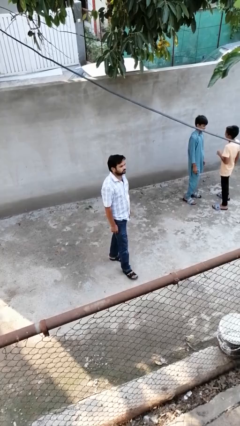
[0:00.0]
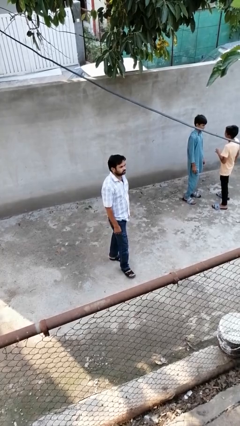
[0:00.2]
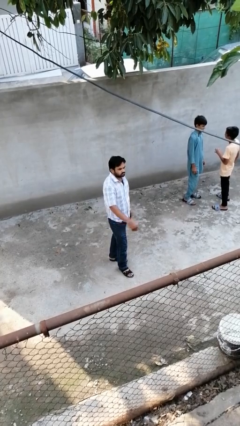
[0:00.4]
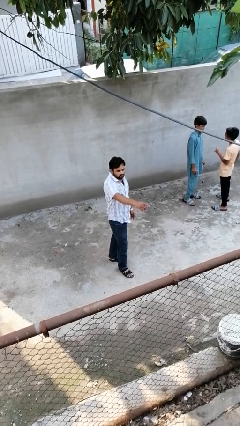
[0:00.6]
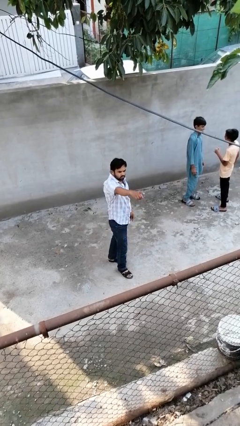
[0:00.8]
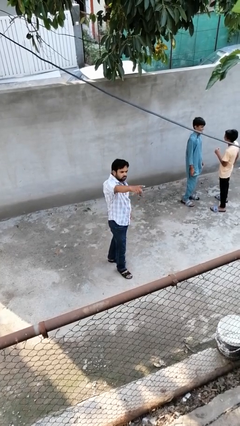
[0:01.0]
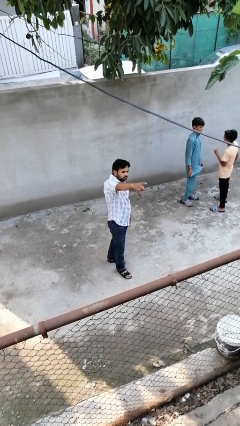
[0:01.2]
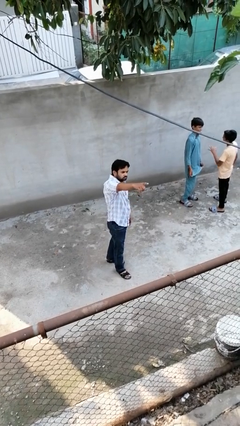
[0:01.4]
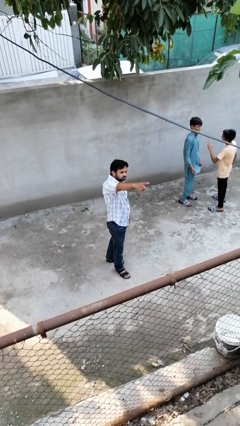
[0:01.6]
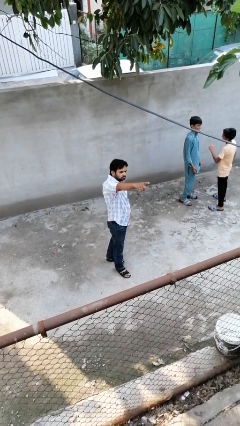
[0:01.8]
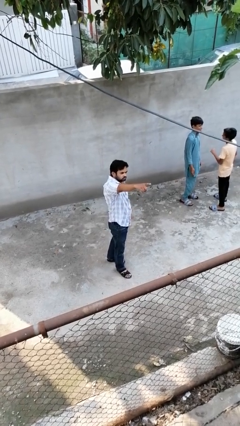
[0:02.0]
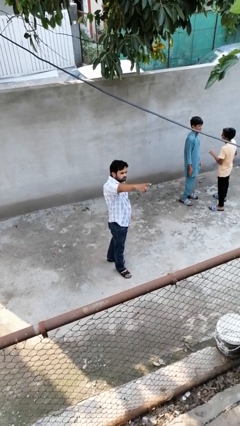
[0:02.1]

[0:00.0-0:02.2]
person points at person

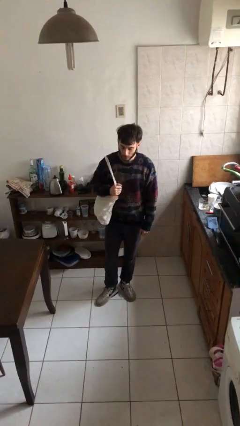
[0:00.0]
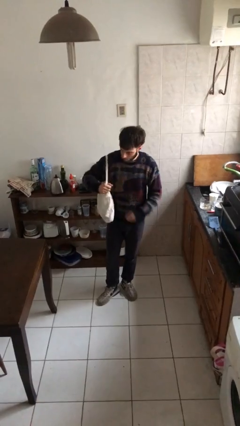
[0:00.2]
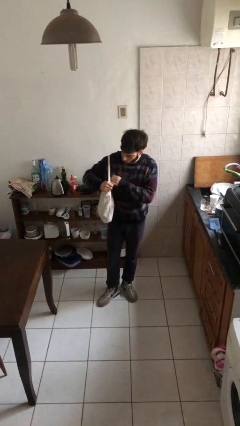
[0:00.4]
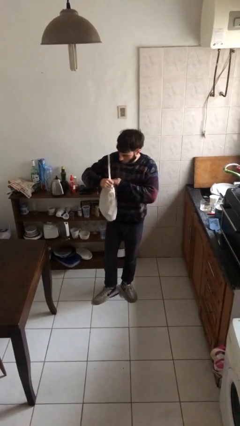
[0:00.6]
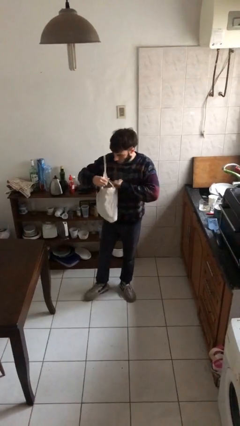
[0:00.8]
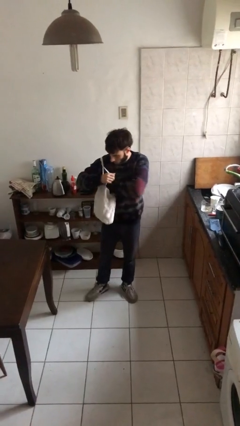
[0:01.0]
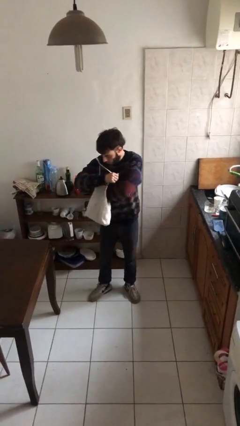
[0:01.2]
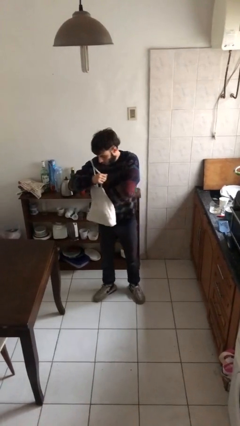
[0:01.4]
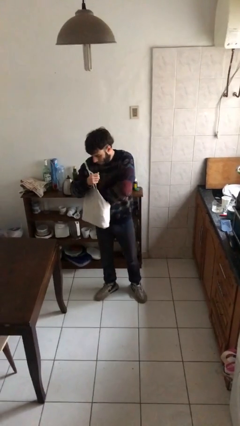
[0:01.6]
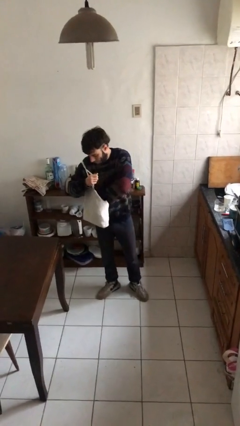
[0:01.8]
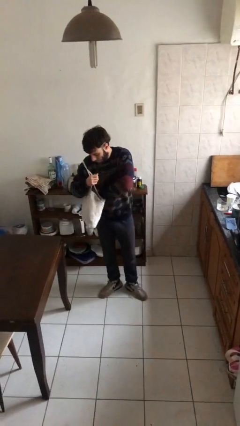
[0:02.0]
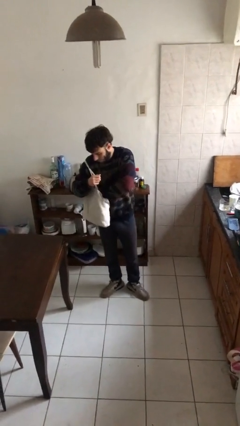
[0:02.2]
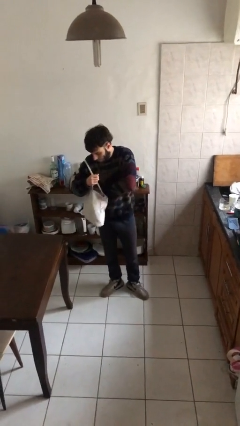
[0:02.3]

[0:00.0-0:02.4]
person searches in purse

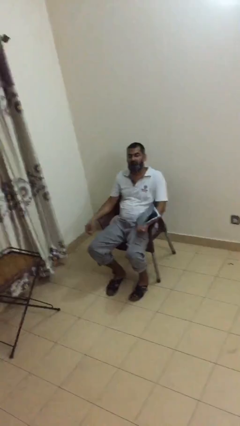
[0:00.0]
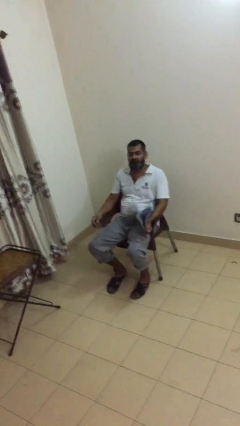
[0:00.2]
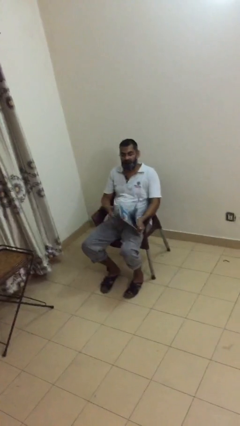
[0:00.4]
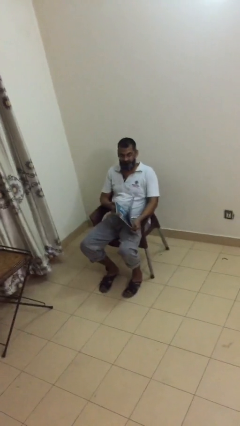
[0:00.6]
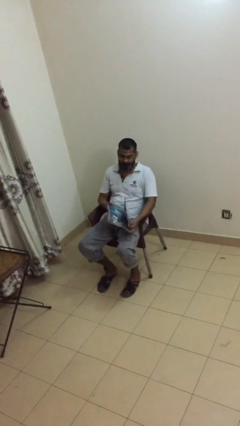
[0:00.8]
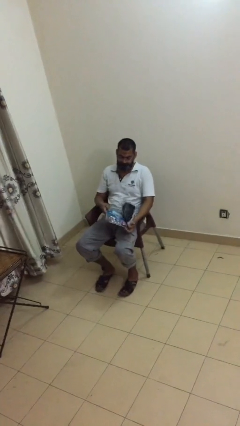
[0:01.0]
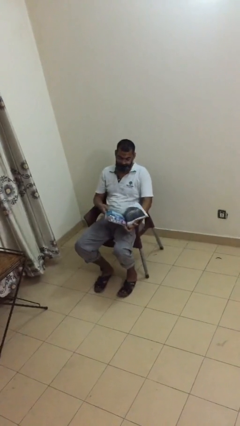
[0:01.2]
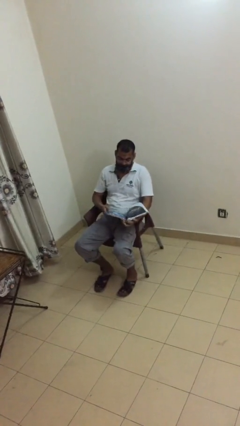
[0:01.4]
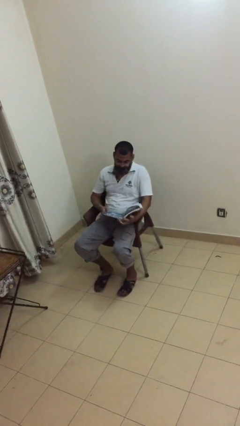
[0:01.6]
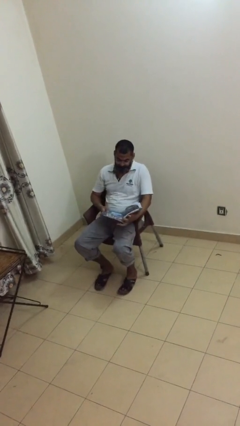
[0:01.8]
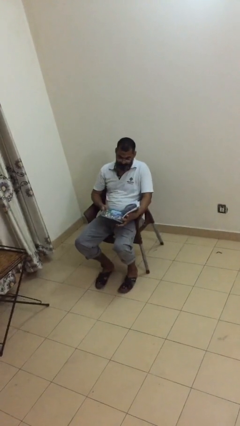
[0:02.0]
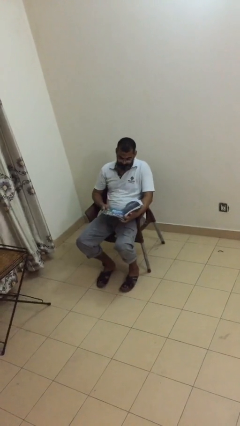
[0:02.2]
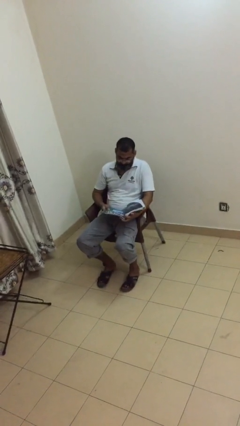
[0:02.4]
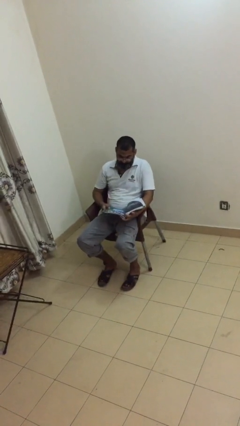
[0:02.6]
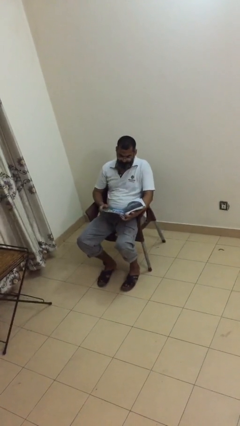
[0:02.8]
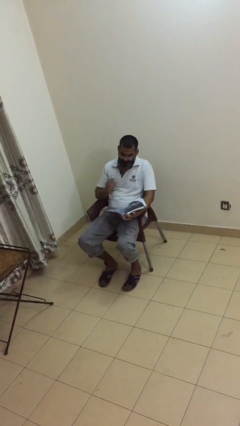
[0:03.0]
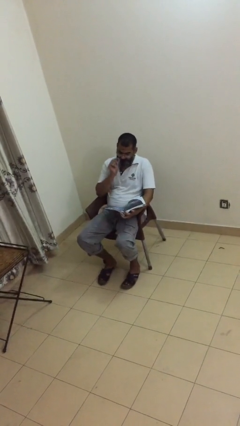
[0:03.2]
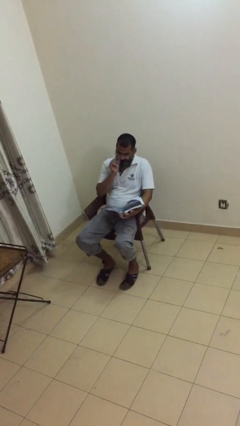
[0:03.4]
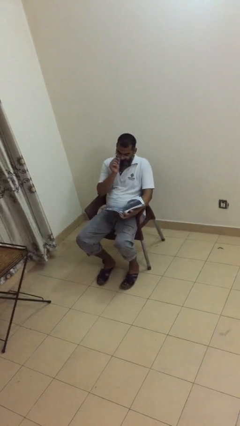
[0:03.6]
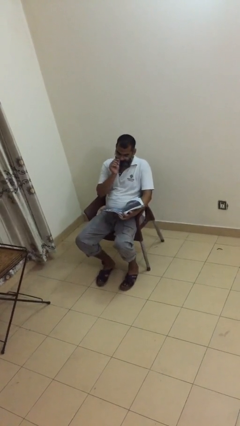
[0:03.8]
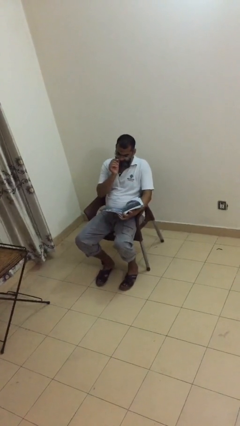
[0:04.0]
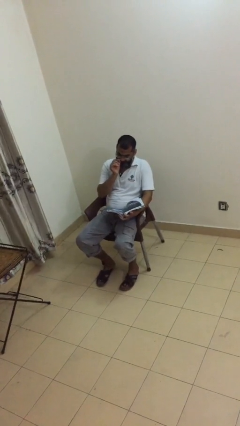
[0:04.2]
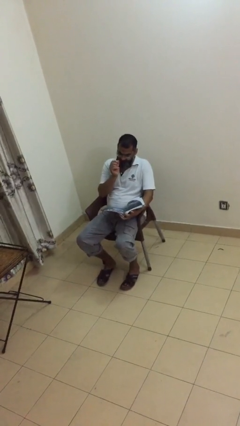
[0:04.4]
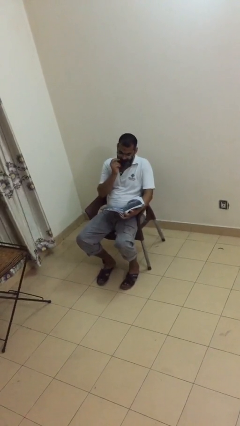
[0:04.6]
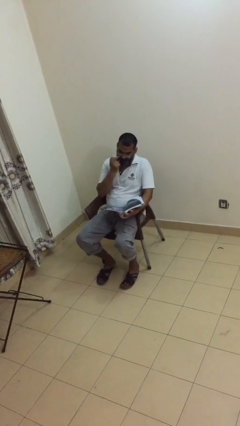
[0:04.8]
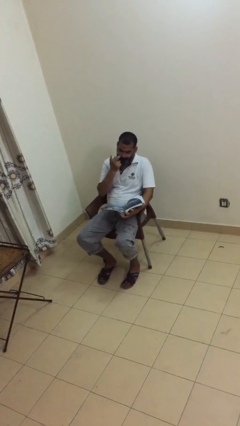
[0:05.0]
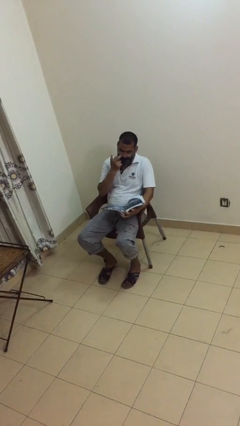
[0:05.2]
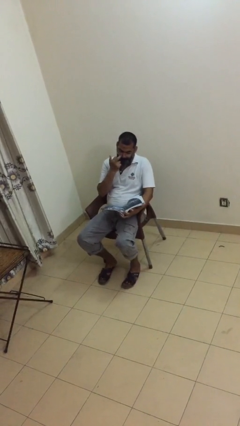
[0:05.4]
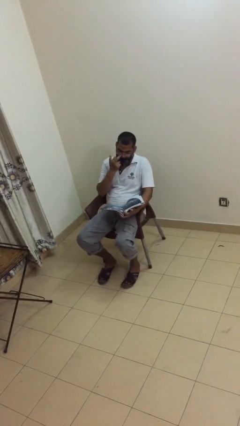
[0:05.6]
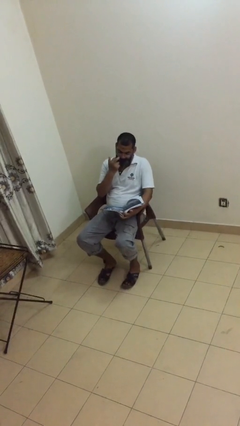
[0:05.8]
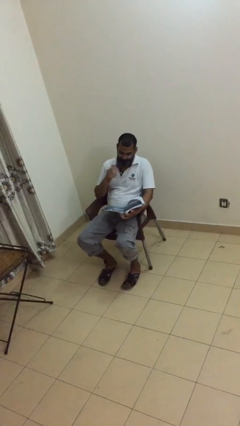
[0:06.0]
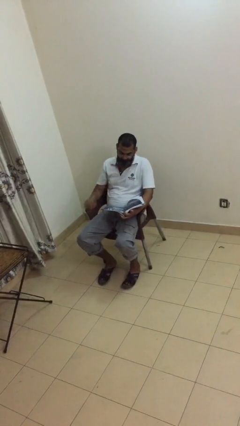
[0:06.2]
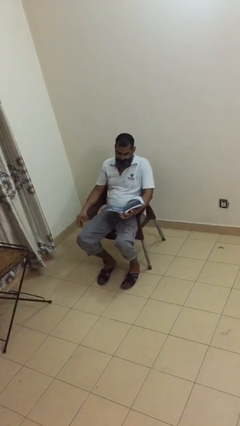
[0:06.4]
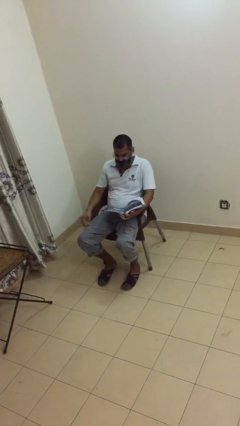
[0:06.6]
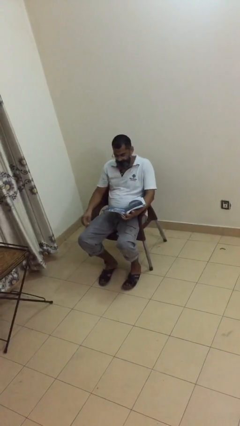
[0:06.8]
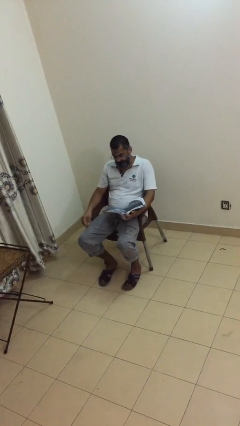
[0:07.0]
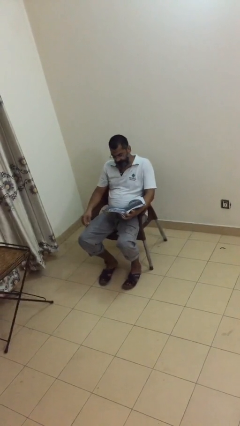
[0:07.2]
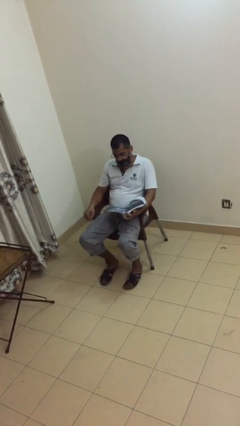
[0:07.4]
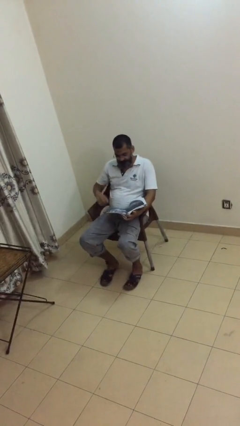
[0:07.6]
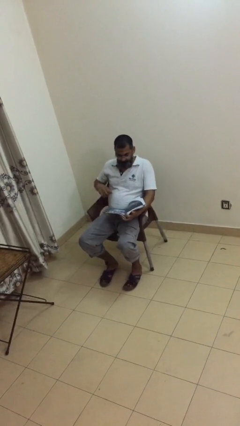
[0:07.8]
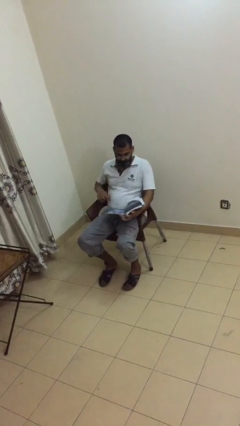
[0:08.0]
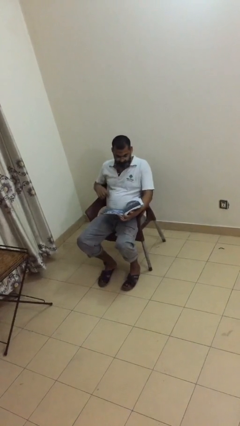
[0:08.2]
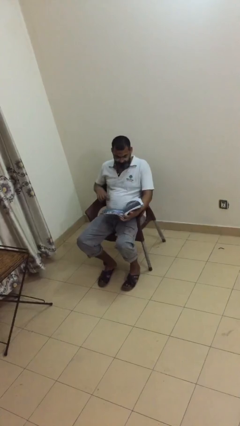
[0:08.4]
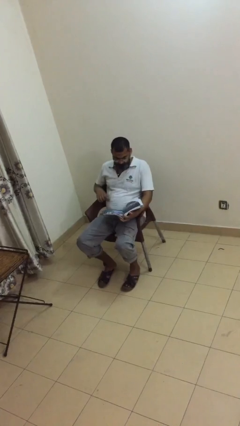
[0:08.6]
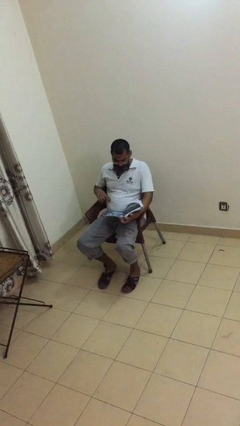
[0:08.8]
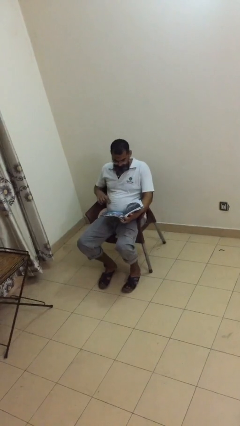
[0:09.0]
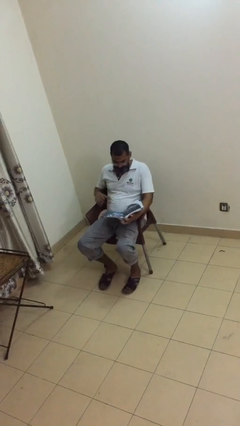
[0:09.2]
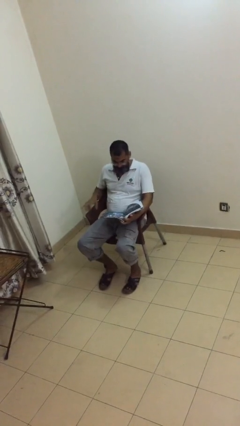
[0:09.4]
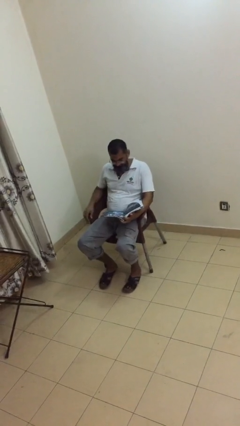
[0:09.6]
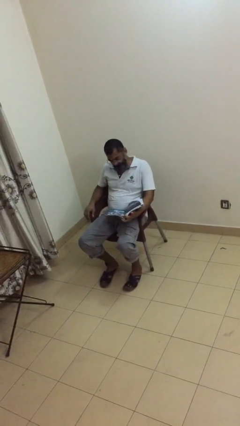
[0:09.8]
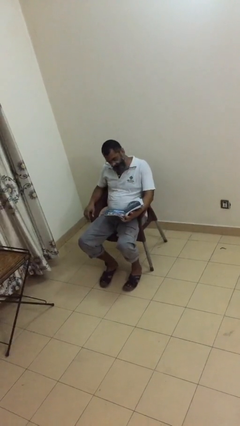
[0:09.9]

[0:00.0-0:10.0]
person reads document

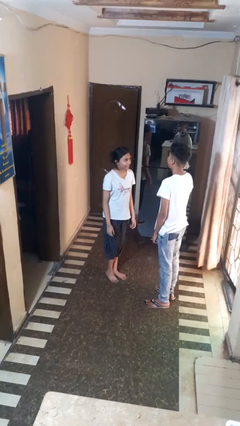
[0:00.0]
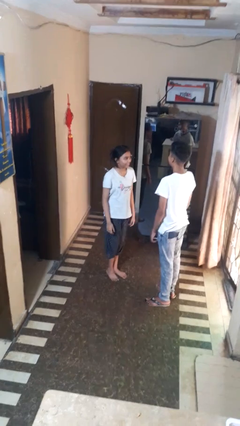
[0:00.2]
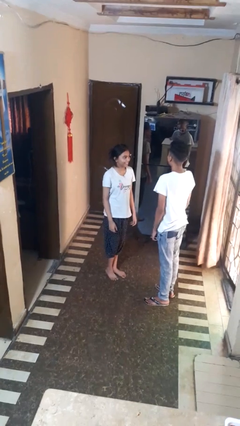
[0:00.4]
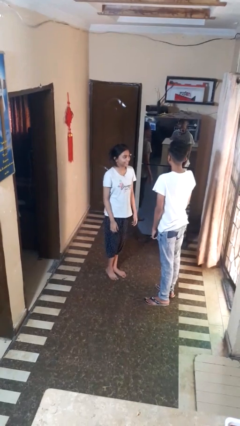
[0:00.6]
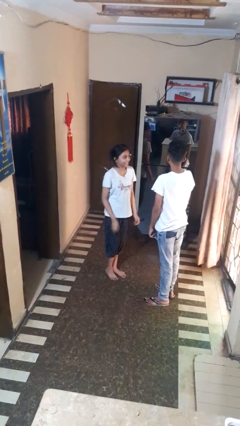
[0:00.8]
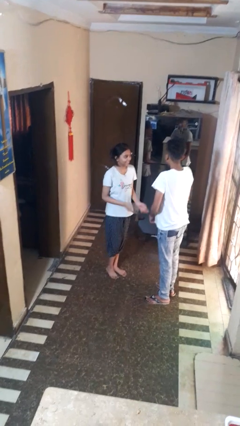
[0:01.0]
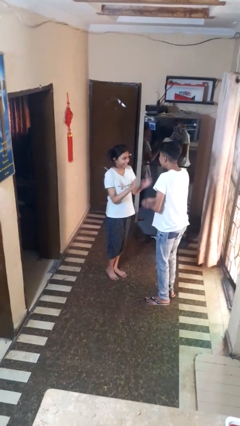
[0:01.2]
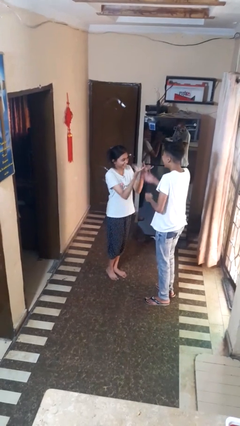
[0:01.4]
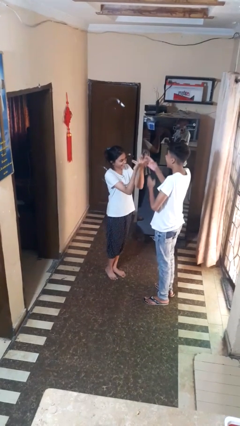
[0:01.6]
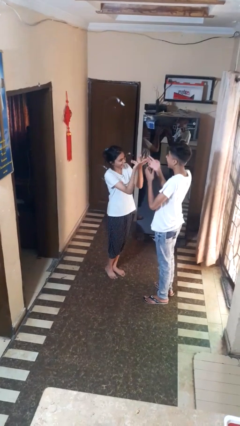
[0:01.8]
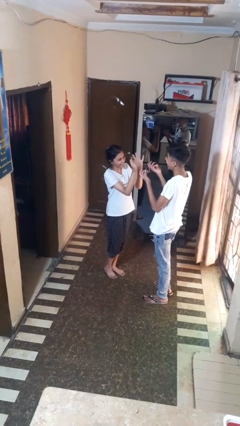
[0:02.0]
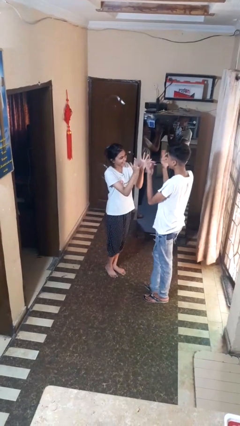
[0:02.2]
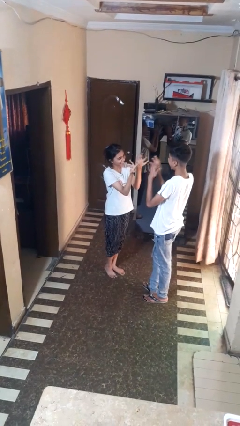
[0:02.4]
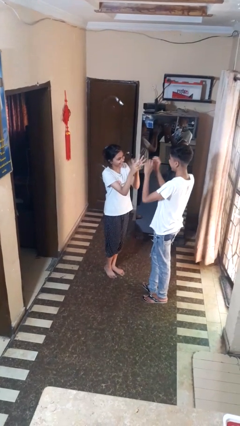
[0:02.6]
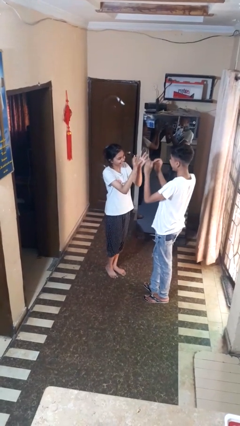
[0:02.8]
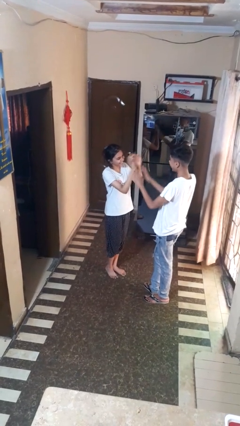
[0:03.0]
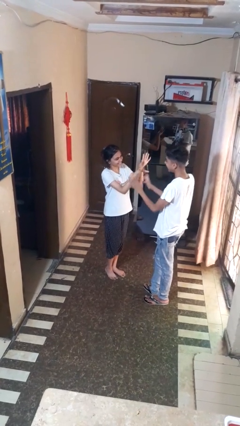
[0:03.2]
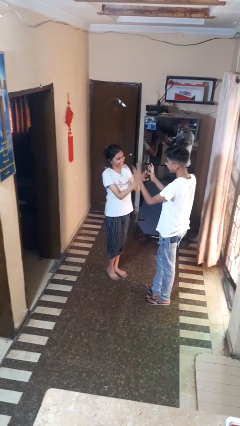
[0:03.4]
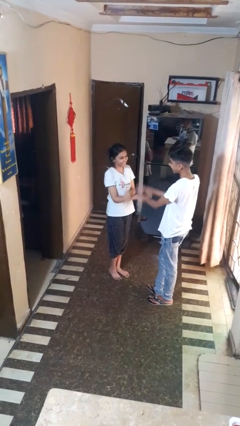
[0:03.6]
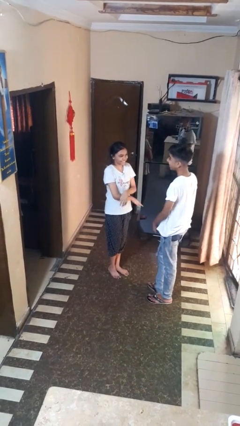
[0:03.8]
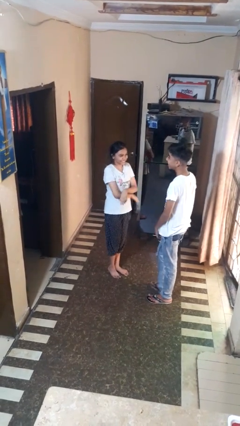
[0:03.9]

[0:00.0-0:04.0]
person laughs with person
